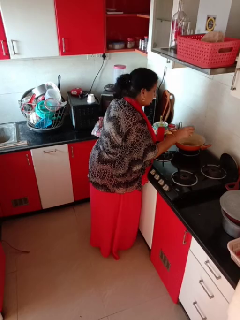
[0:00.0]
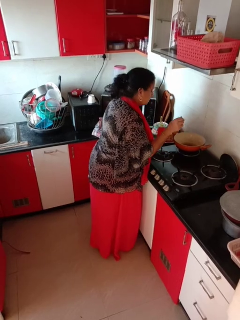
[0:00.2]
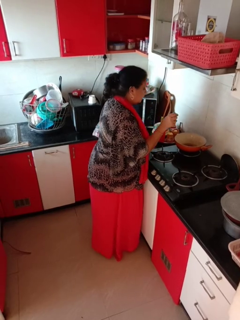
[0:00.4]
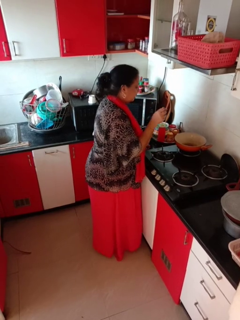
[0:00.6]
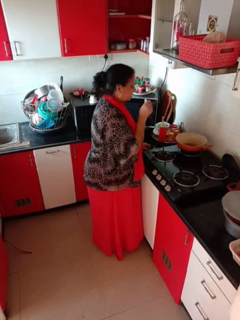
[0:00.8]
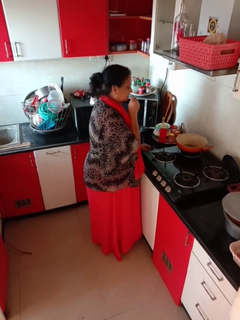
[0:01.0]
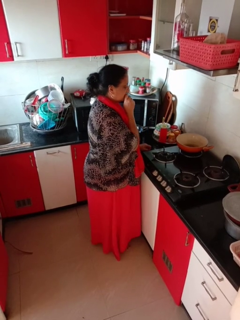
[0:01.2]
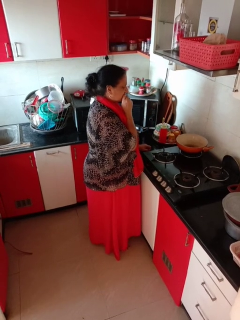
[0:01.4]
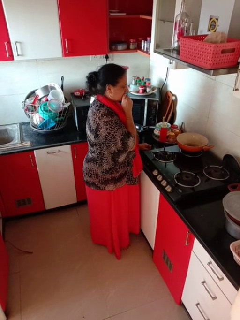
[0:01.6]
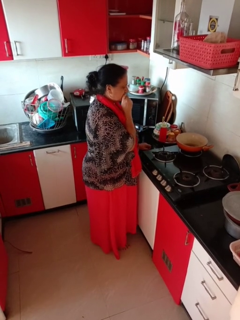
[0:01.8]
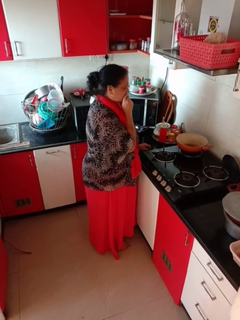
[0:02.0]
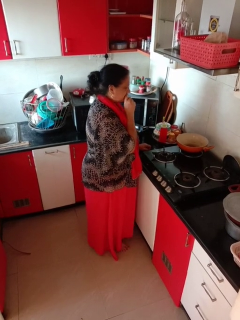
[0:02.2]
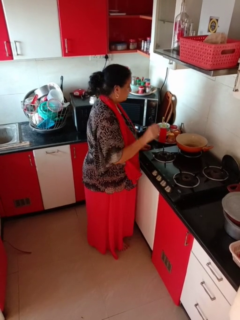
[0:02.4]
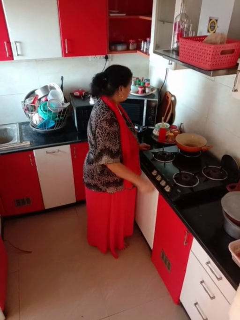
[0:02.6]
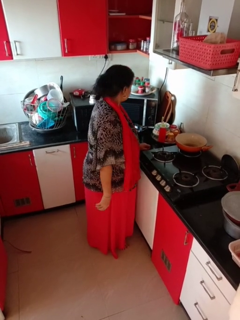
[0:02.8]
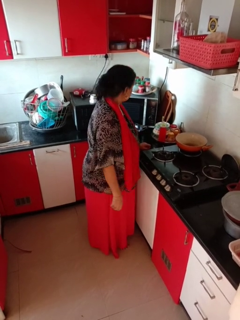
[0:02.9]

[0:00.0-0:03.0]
person burns hand

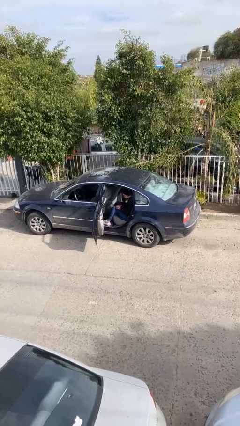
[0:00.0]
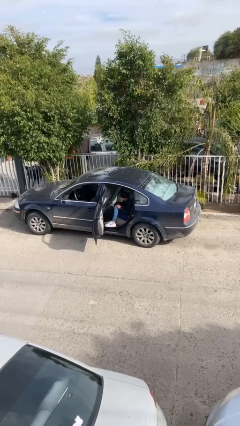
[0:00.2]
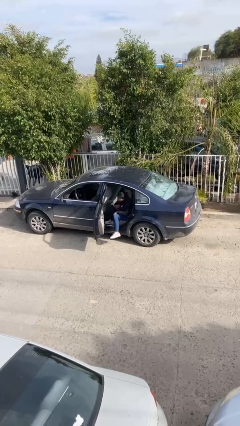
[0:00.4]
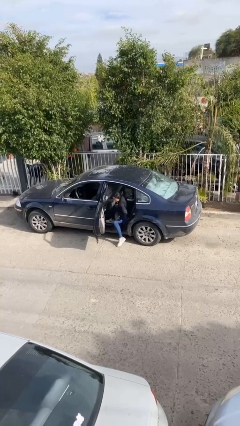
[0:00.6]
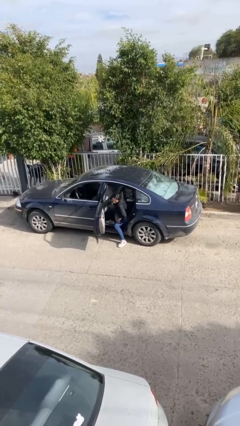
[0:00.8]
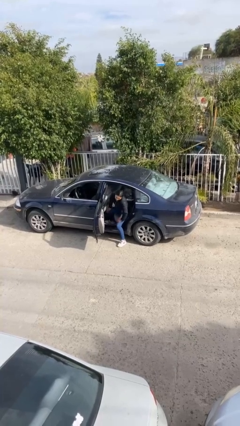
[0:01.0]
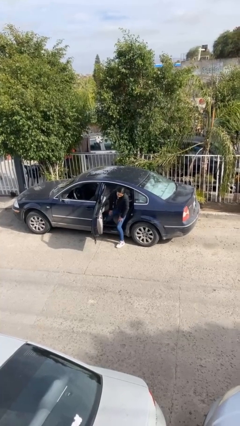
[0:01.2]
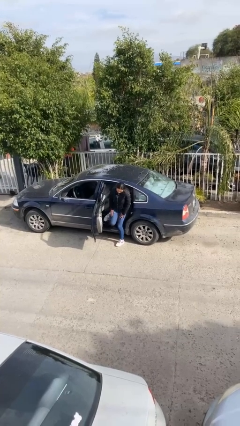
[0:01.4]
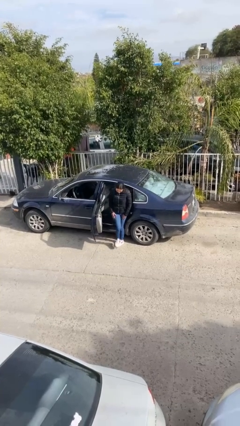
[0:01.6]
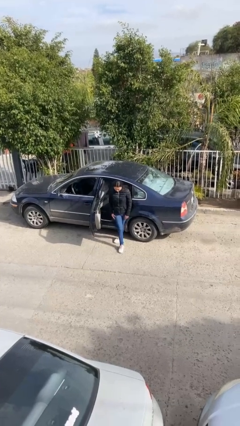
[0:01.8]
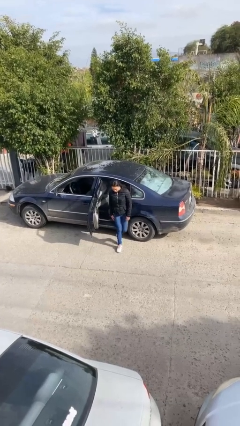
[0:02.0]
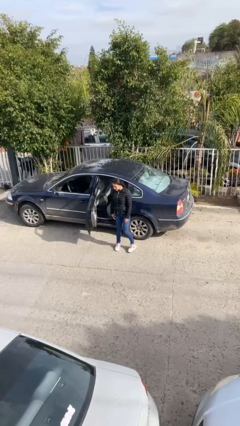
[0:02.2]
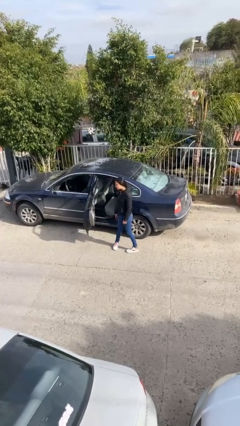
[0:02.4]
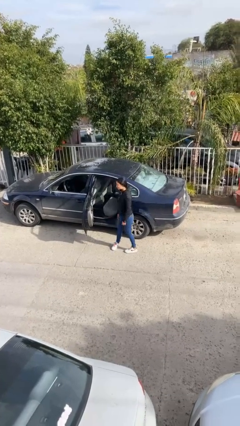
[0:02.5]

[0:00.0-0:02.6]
person exits car

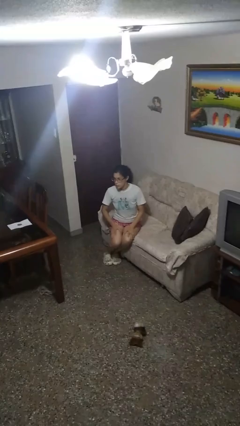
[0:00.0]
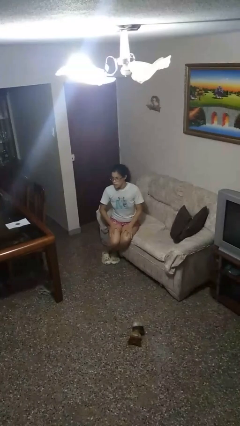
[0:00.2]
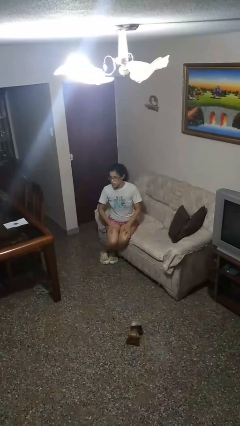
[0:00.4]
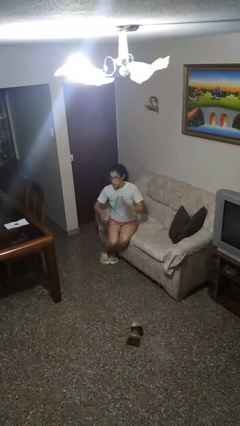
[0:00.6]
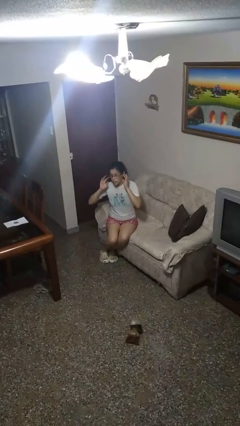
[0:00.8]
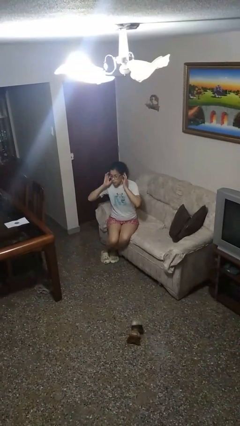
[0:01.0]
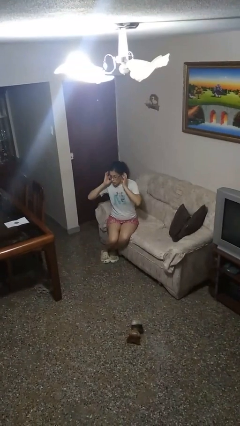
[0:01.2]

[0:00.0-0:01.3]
person puts fingers in ear

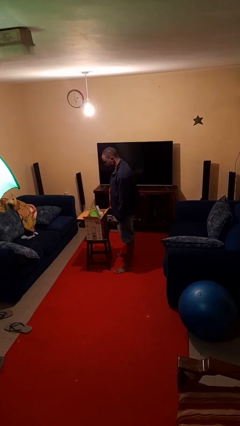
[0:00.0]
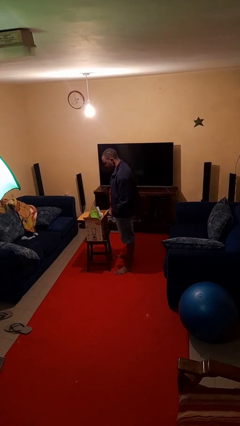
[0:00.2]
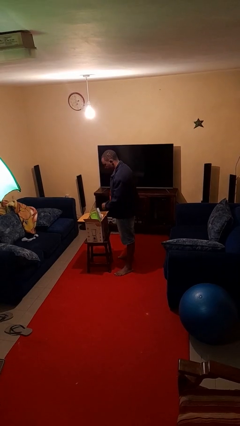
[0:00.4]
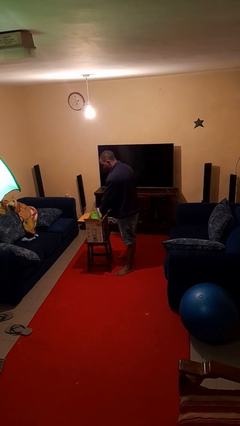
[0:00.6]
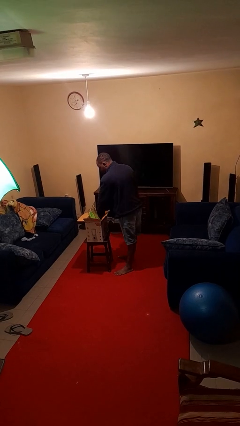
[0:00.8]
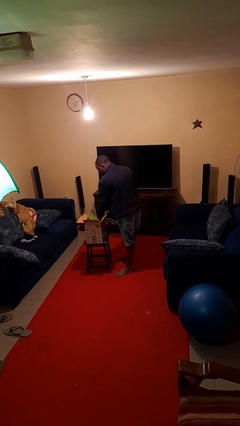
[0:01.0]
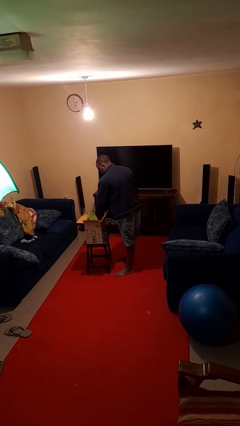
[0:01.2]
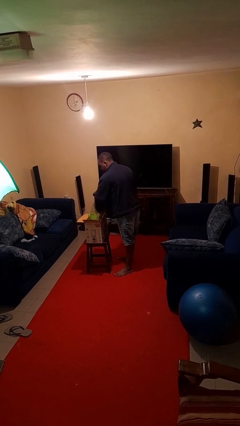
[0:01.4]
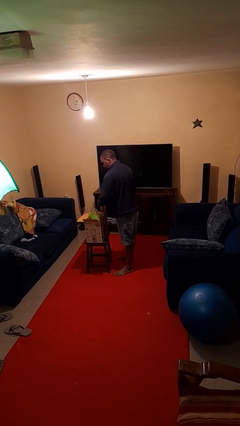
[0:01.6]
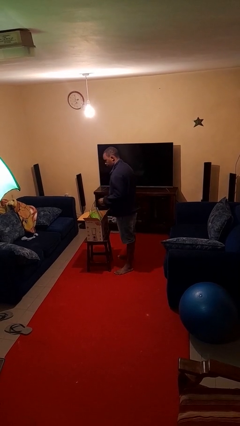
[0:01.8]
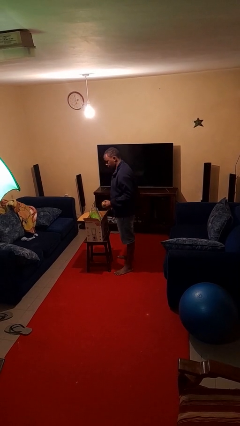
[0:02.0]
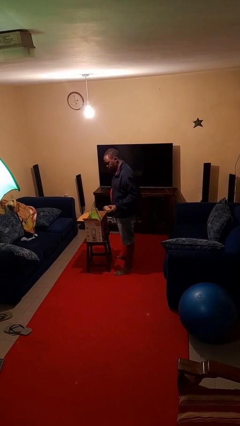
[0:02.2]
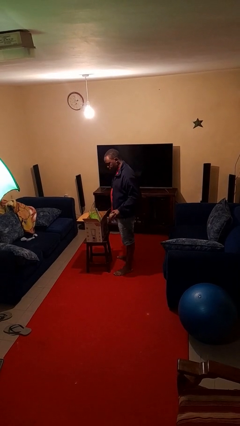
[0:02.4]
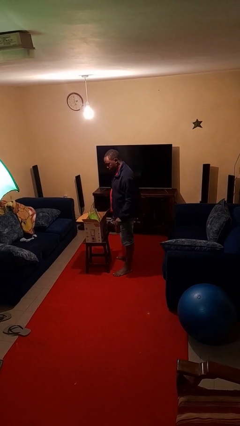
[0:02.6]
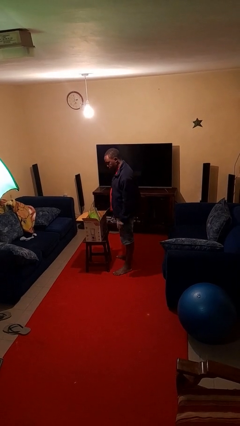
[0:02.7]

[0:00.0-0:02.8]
person takes object from box

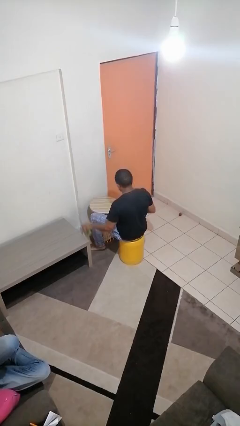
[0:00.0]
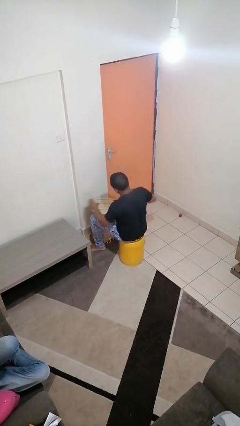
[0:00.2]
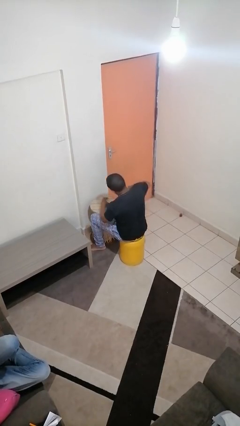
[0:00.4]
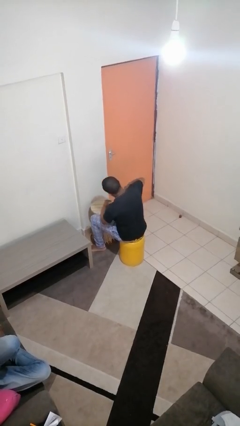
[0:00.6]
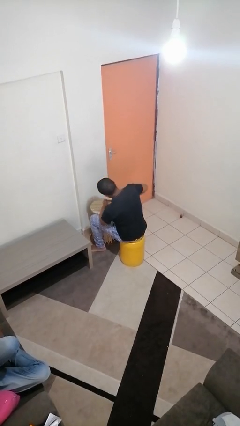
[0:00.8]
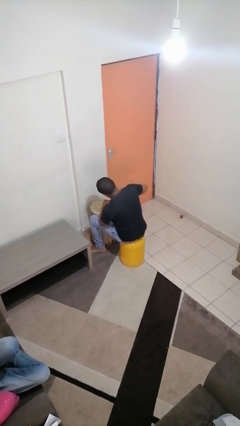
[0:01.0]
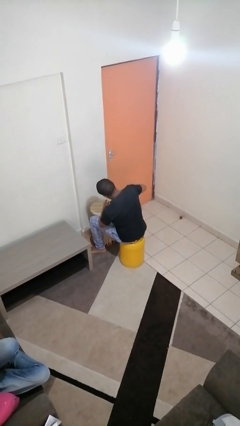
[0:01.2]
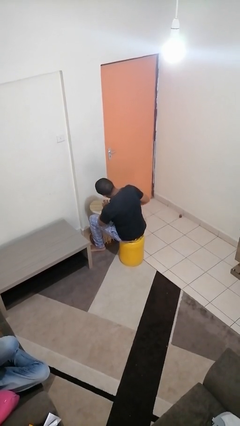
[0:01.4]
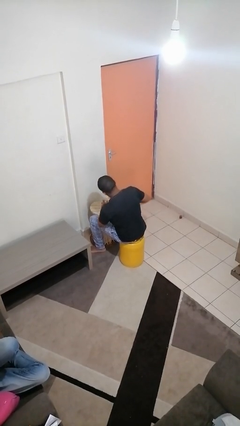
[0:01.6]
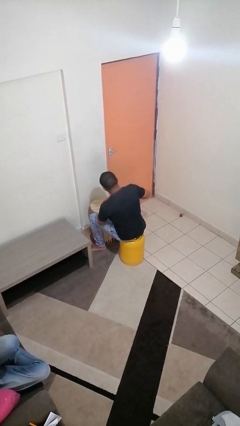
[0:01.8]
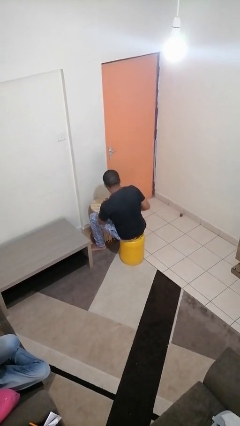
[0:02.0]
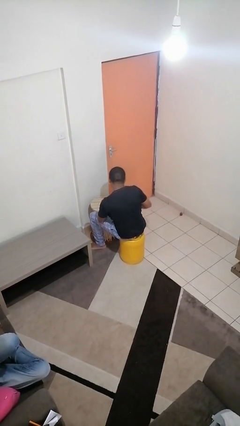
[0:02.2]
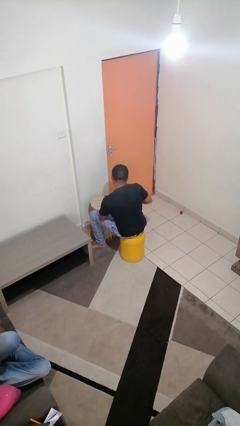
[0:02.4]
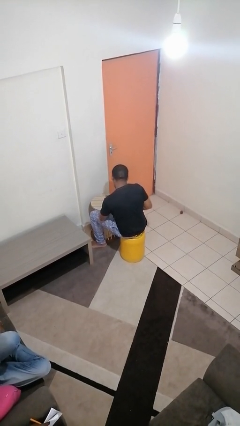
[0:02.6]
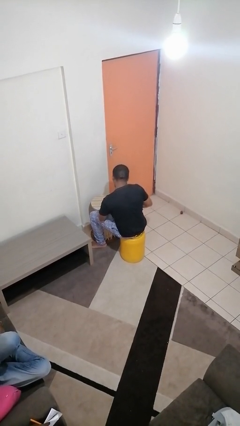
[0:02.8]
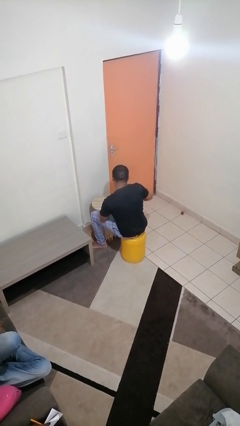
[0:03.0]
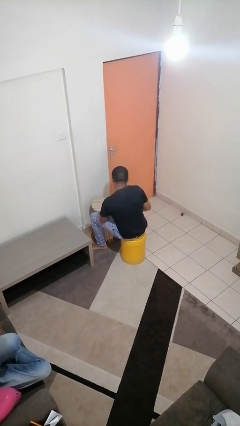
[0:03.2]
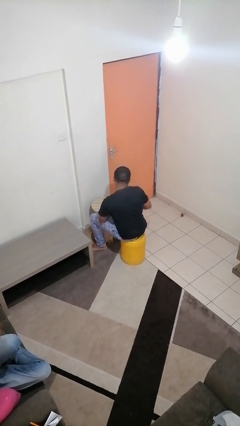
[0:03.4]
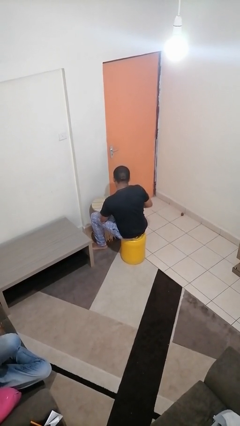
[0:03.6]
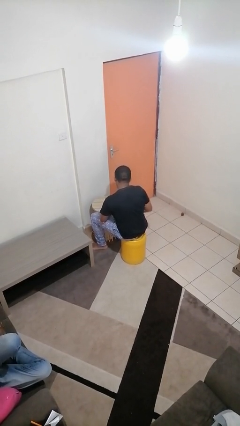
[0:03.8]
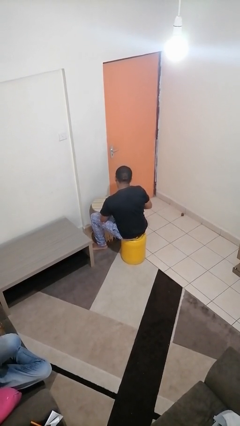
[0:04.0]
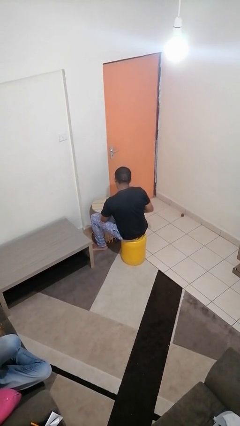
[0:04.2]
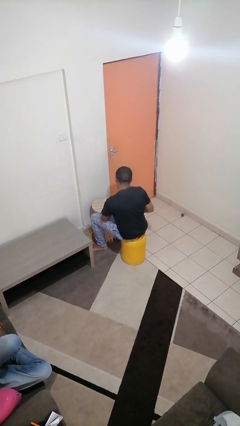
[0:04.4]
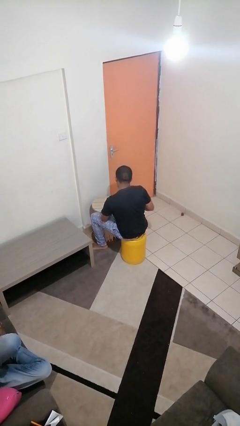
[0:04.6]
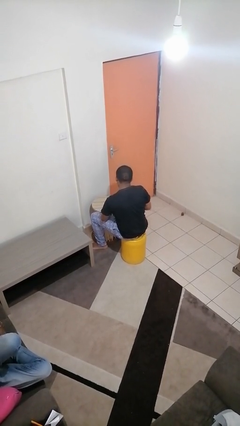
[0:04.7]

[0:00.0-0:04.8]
person opens can with can opener

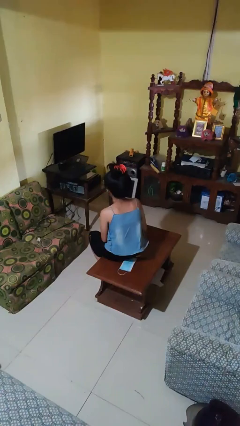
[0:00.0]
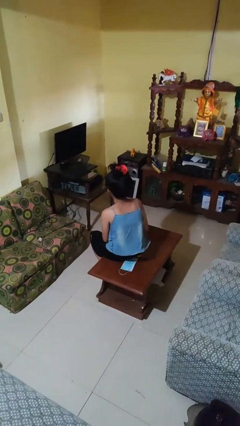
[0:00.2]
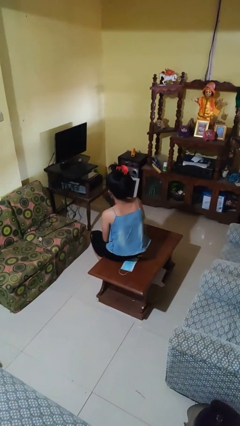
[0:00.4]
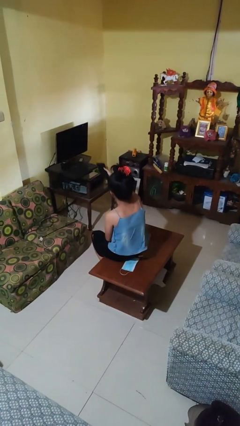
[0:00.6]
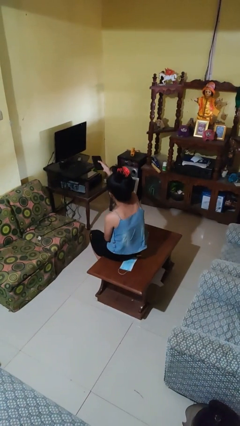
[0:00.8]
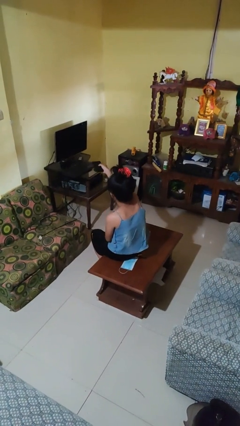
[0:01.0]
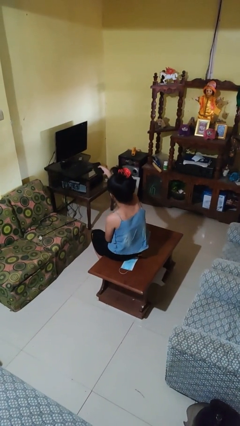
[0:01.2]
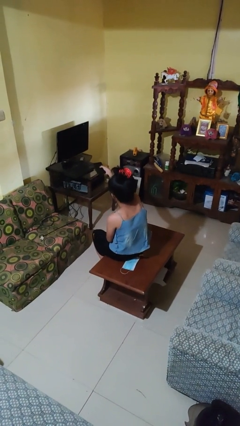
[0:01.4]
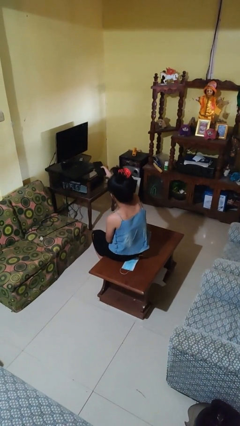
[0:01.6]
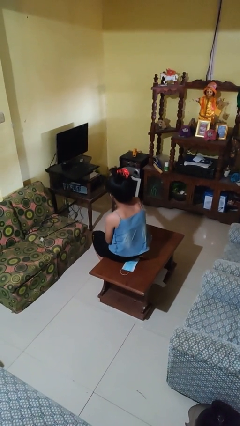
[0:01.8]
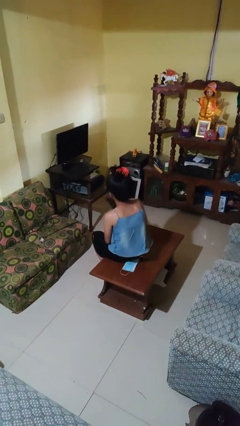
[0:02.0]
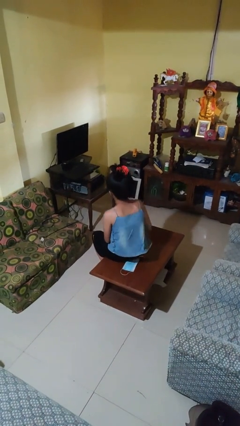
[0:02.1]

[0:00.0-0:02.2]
person uses television remote

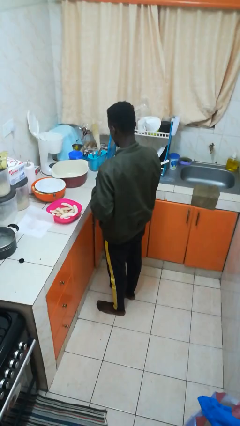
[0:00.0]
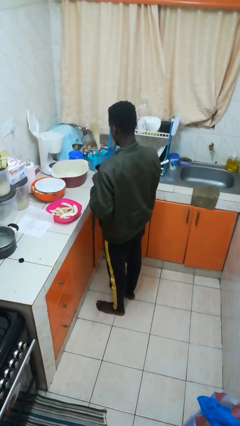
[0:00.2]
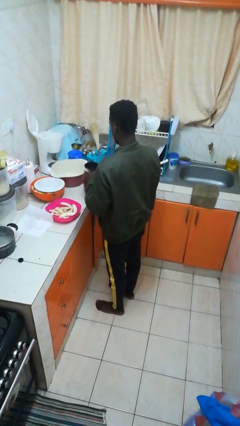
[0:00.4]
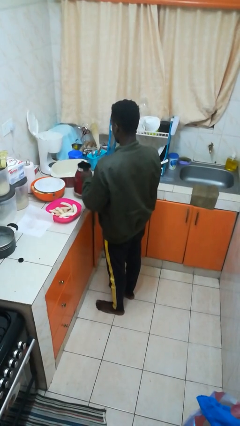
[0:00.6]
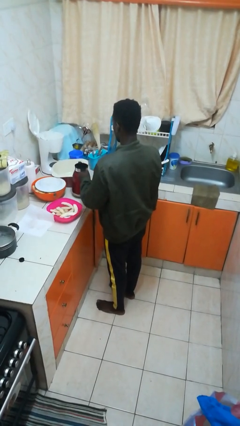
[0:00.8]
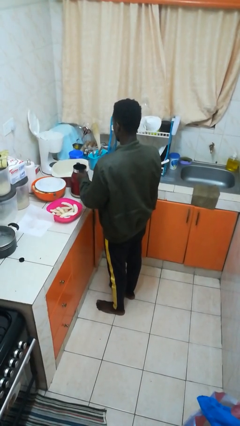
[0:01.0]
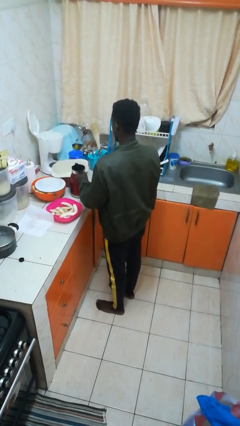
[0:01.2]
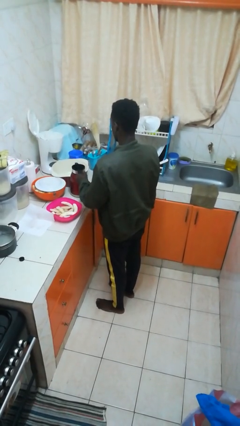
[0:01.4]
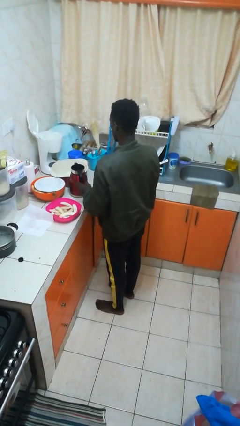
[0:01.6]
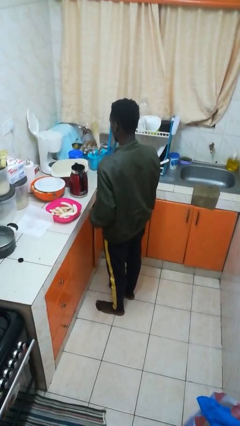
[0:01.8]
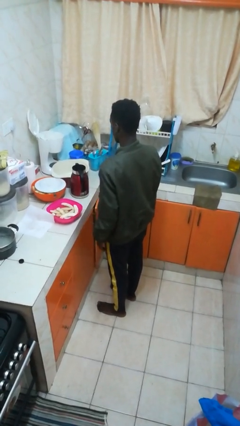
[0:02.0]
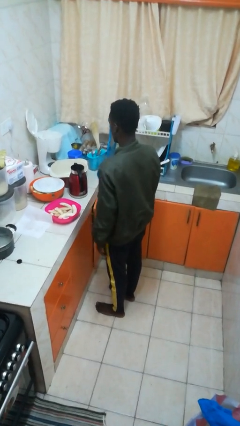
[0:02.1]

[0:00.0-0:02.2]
person puts down object on countertop
